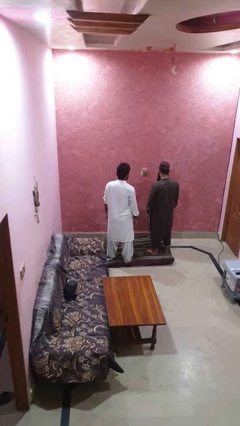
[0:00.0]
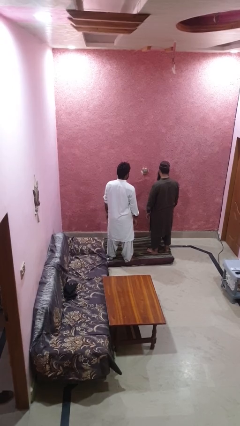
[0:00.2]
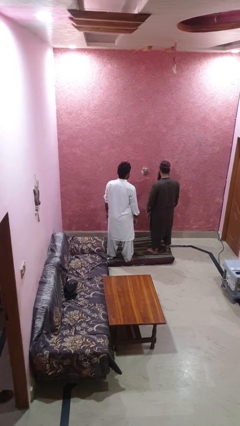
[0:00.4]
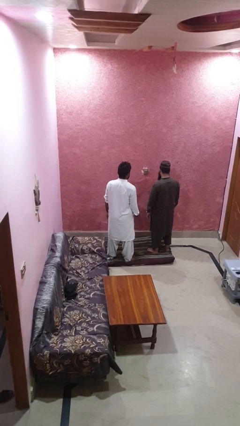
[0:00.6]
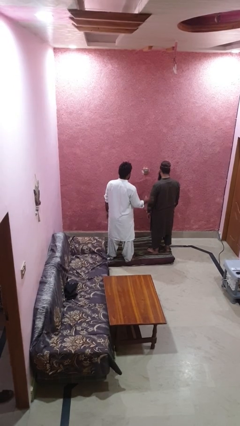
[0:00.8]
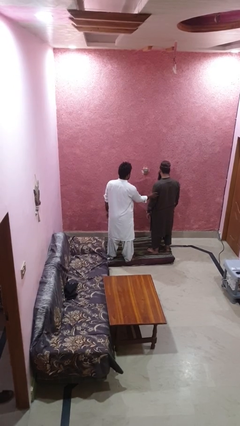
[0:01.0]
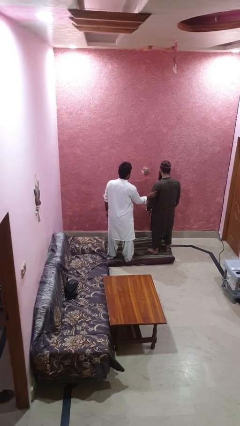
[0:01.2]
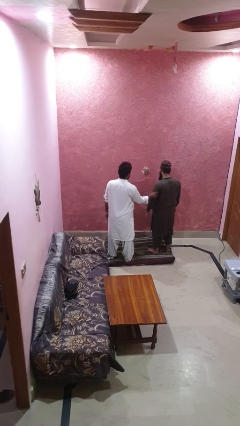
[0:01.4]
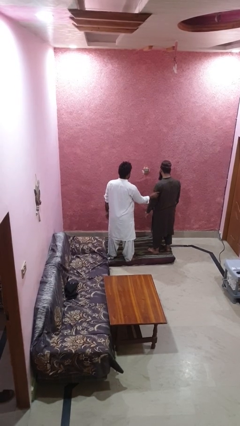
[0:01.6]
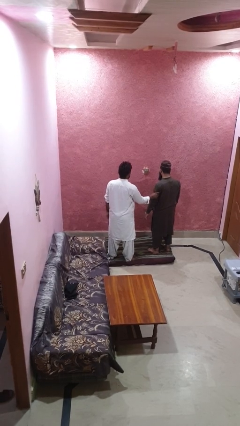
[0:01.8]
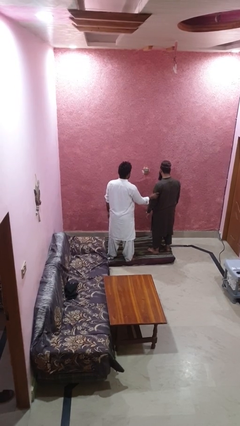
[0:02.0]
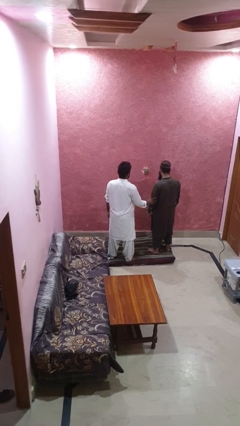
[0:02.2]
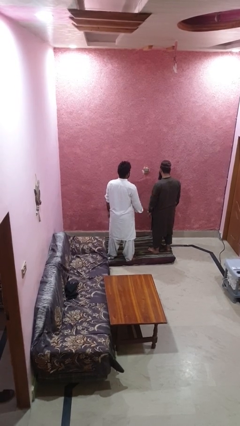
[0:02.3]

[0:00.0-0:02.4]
person grabs person by bicep

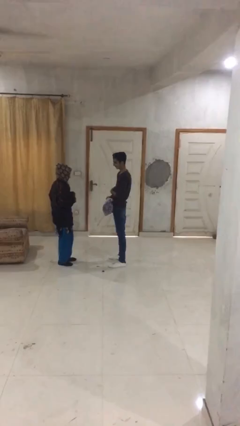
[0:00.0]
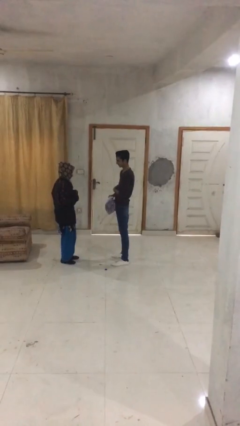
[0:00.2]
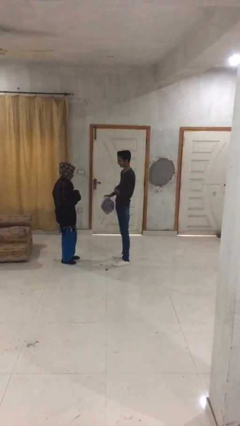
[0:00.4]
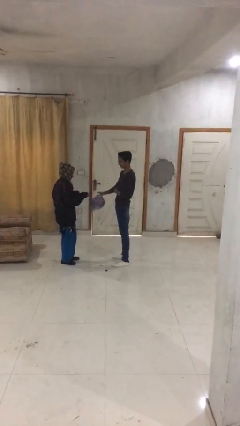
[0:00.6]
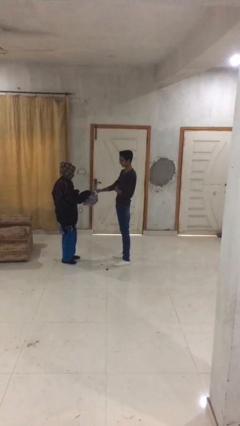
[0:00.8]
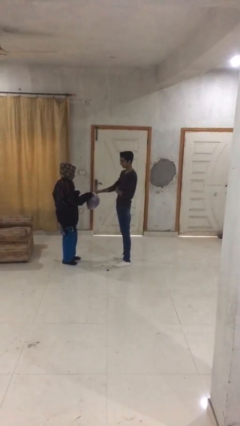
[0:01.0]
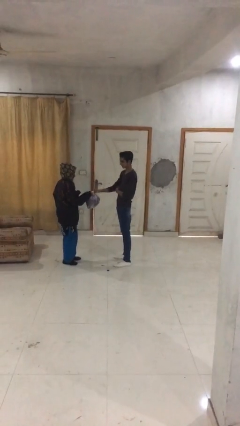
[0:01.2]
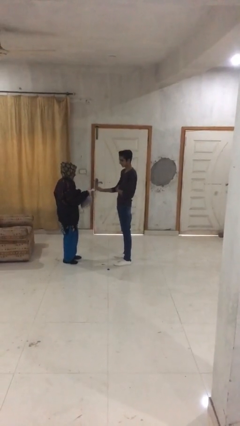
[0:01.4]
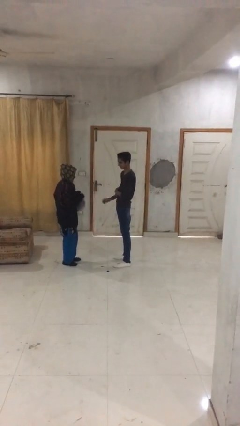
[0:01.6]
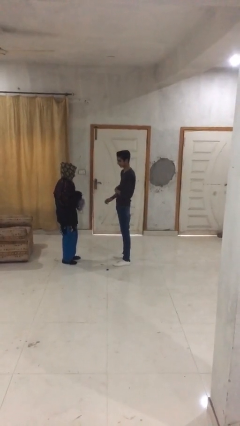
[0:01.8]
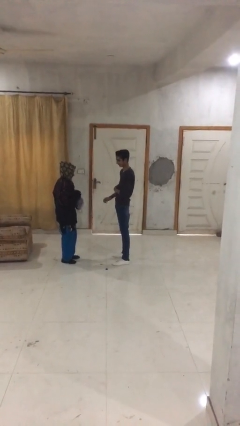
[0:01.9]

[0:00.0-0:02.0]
person transfers object to person

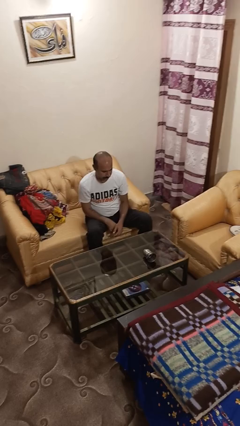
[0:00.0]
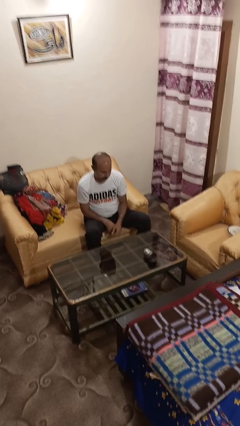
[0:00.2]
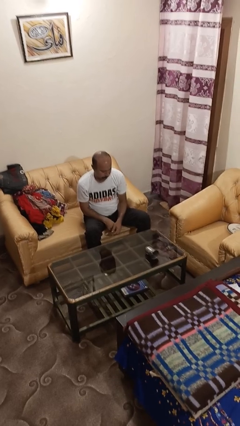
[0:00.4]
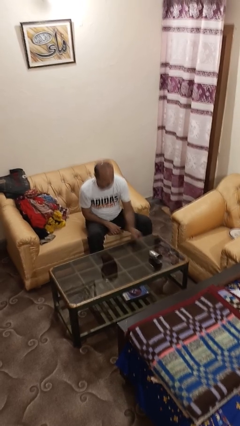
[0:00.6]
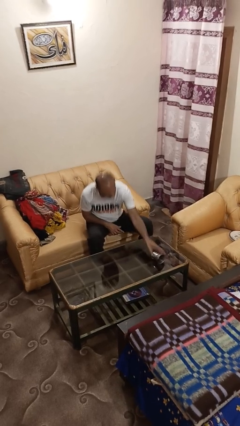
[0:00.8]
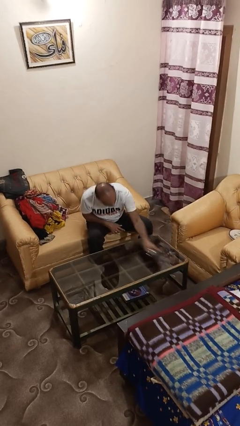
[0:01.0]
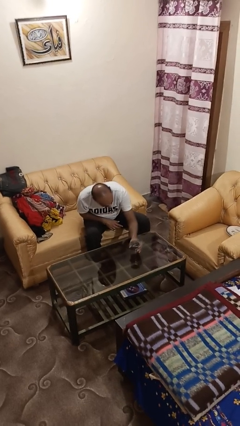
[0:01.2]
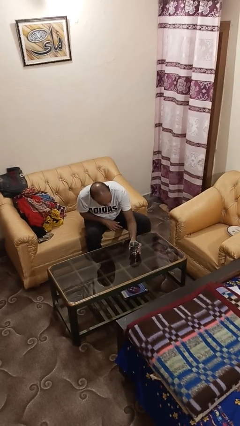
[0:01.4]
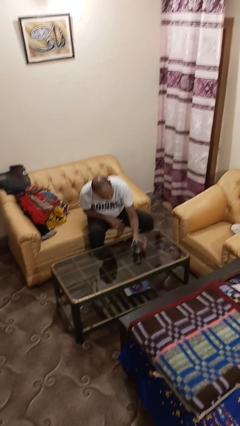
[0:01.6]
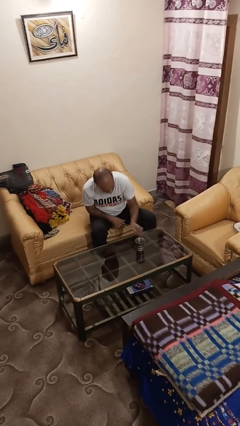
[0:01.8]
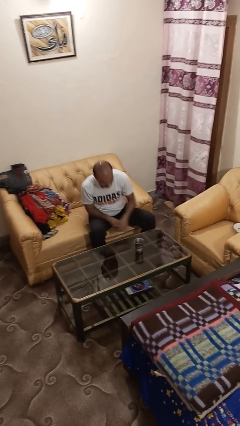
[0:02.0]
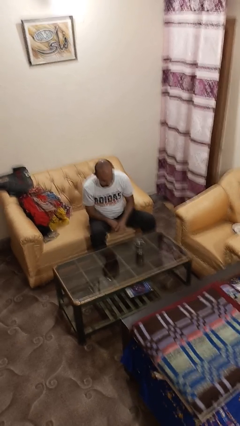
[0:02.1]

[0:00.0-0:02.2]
person sets upright glass

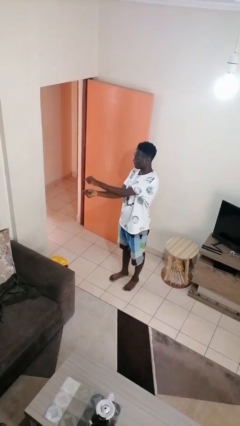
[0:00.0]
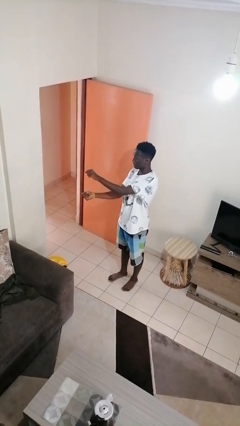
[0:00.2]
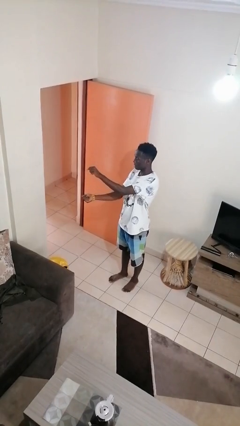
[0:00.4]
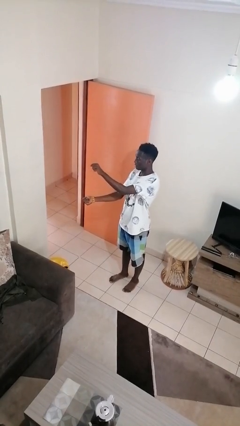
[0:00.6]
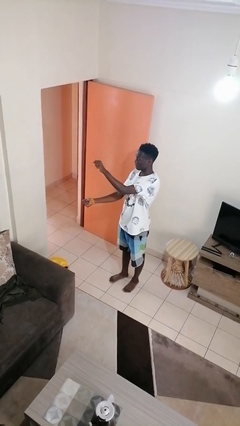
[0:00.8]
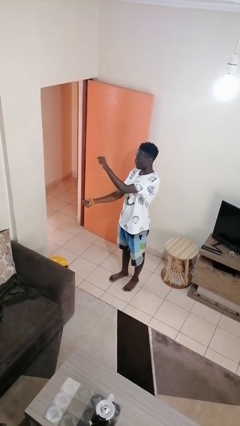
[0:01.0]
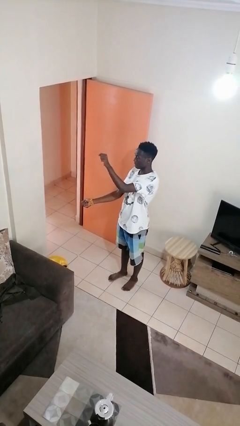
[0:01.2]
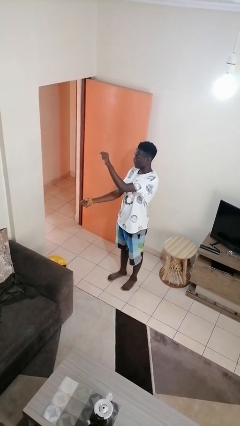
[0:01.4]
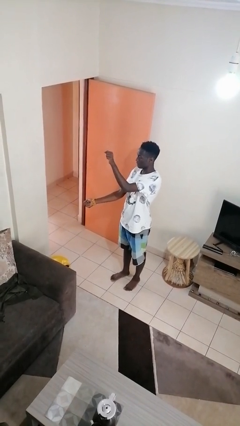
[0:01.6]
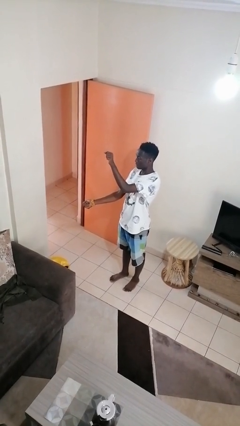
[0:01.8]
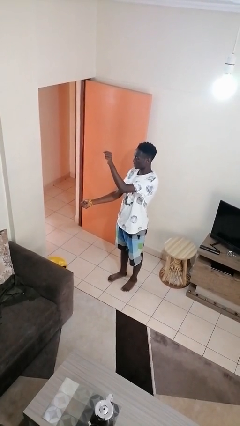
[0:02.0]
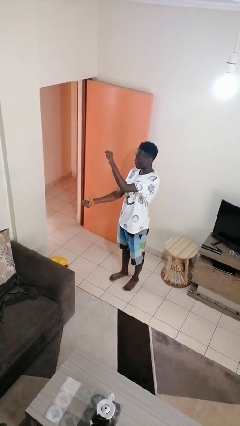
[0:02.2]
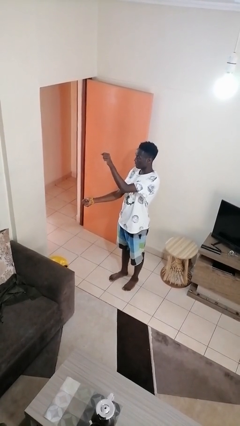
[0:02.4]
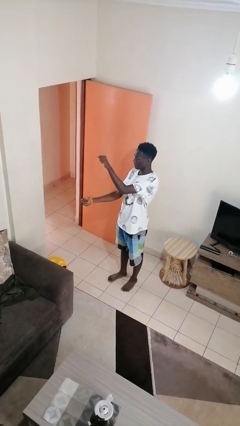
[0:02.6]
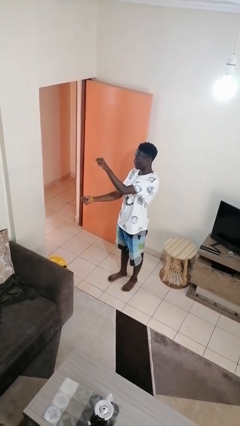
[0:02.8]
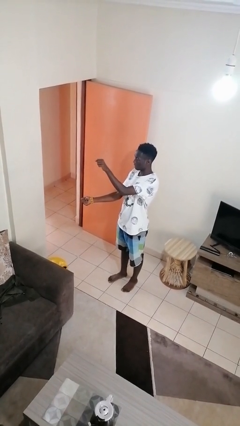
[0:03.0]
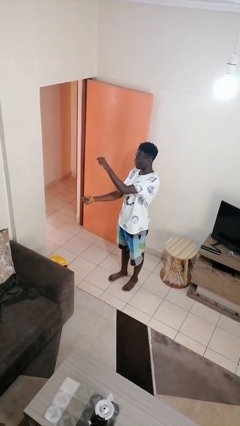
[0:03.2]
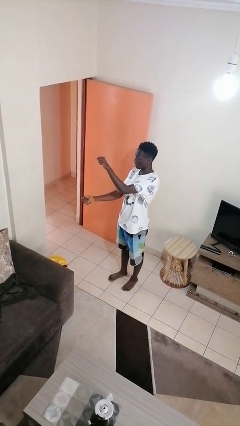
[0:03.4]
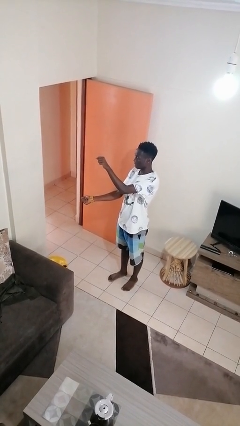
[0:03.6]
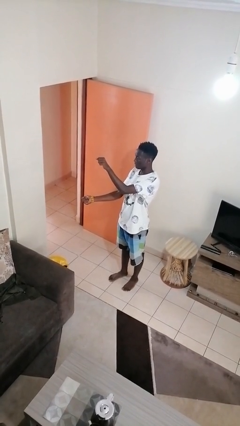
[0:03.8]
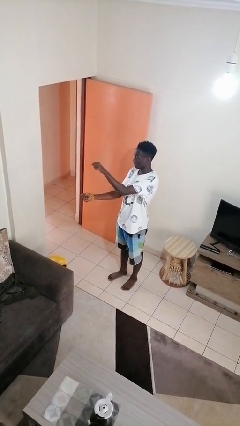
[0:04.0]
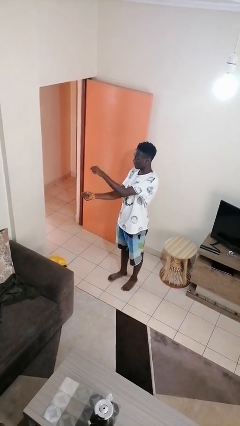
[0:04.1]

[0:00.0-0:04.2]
person gestures zoom in

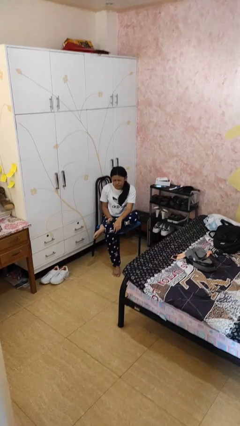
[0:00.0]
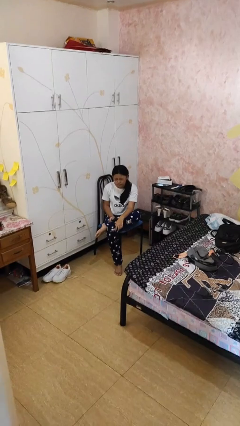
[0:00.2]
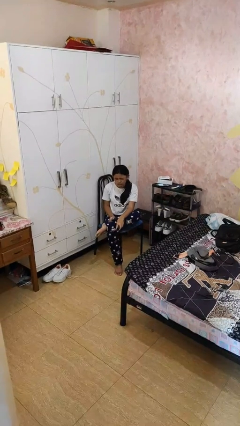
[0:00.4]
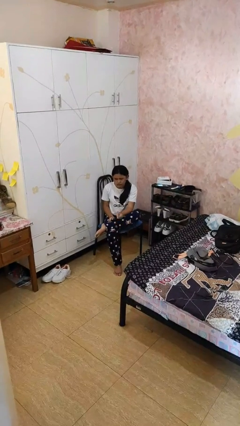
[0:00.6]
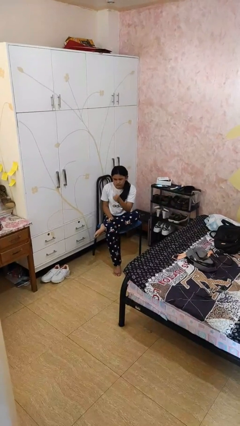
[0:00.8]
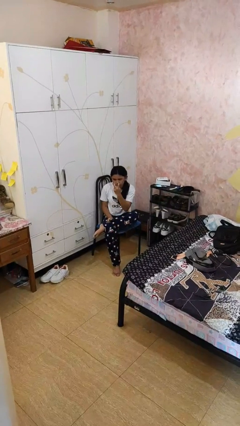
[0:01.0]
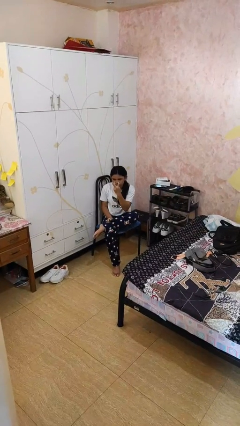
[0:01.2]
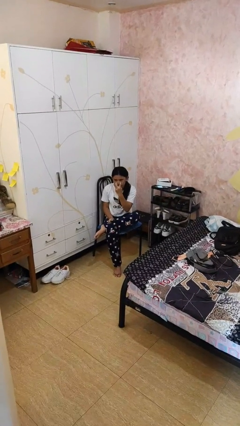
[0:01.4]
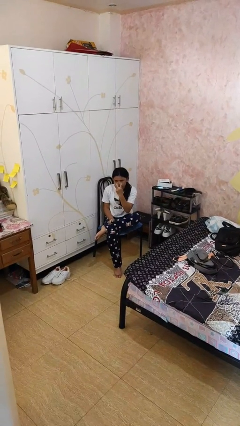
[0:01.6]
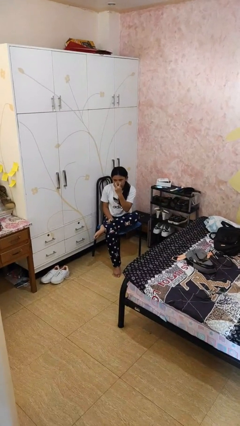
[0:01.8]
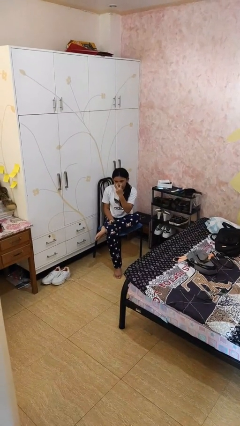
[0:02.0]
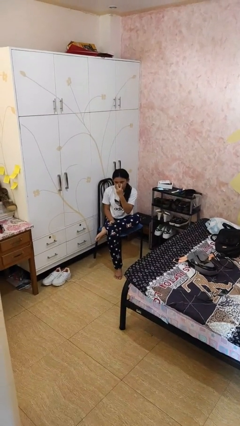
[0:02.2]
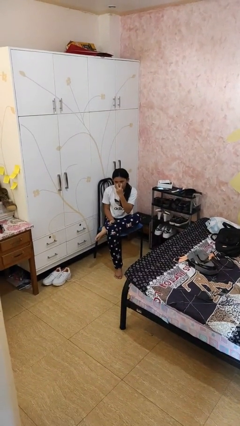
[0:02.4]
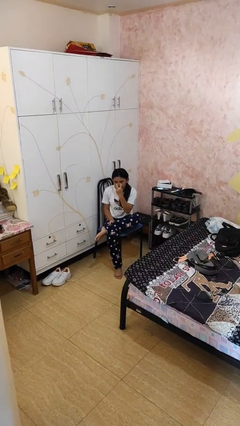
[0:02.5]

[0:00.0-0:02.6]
person gestures watch closely

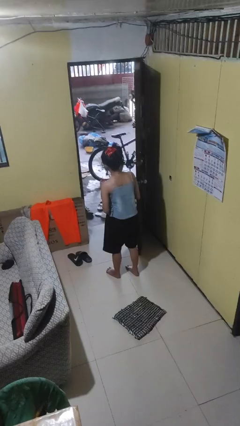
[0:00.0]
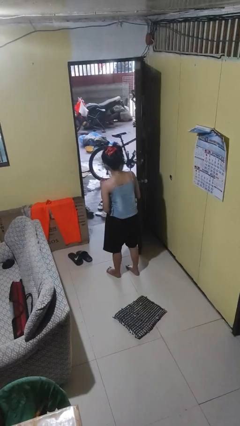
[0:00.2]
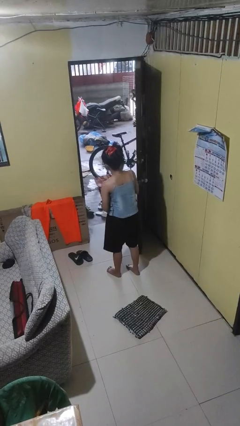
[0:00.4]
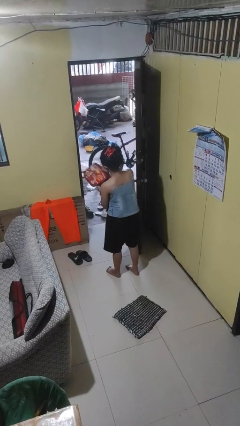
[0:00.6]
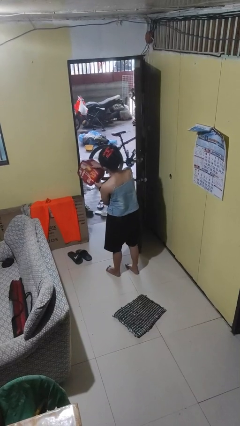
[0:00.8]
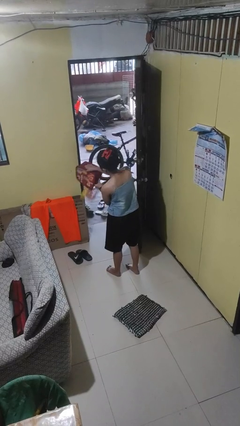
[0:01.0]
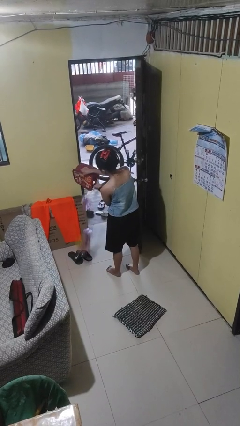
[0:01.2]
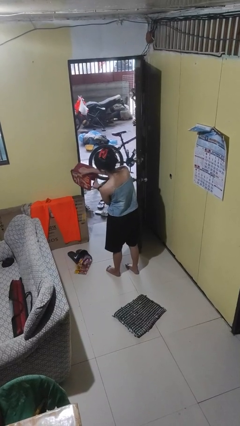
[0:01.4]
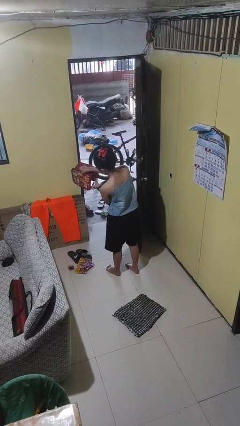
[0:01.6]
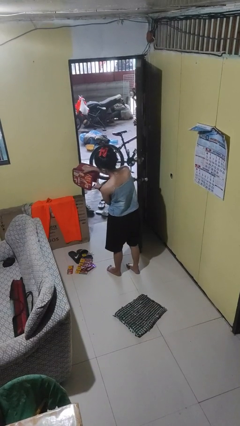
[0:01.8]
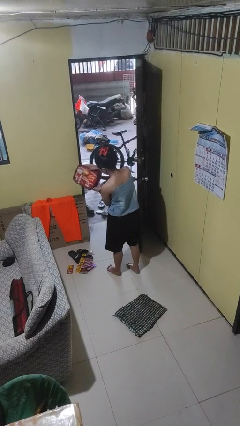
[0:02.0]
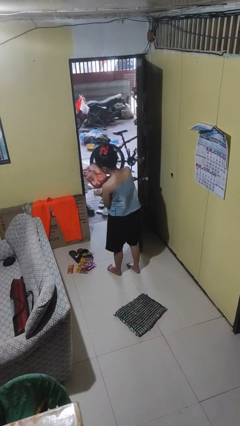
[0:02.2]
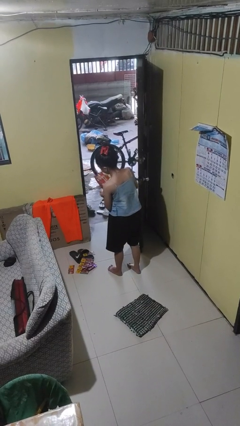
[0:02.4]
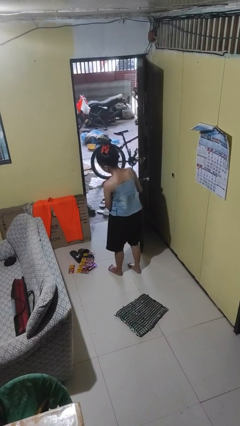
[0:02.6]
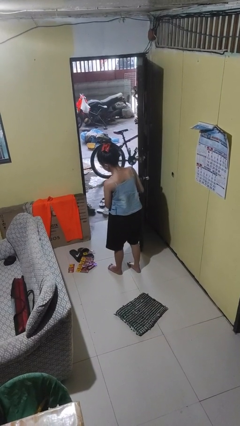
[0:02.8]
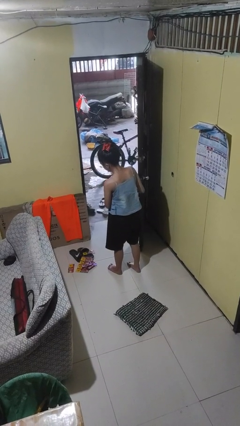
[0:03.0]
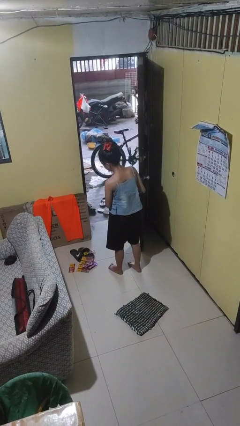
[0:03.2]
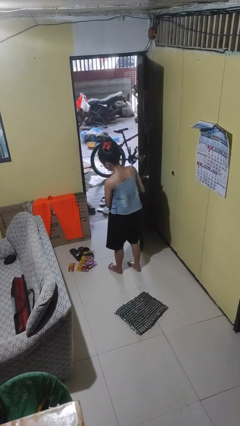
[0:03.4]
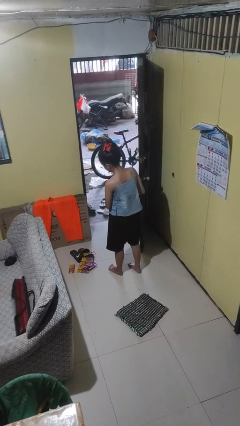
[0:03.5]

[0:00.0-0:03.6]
person unloads box onto floor

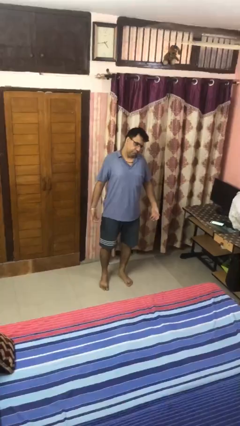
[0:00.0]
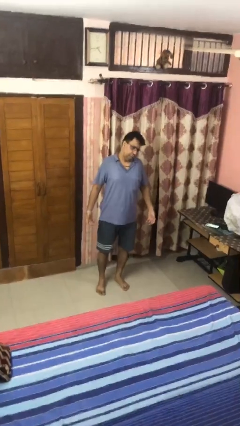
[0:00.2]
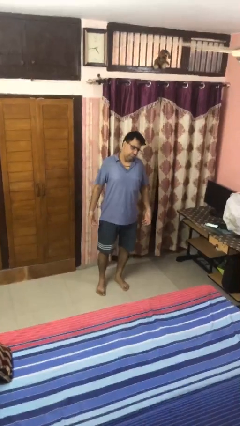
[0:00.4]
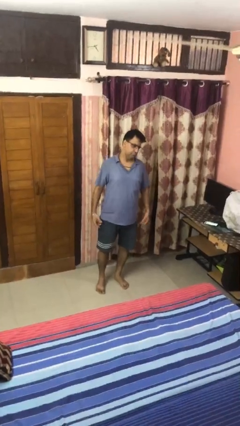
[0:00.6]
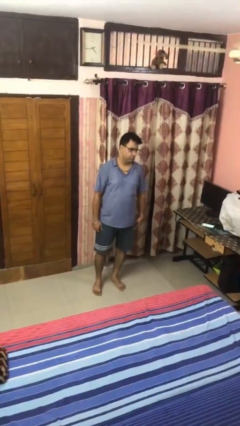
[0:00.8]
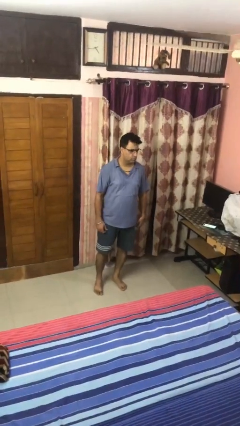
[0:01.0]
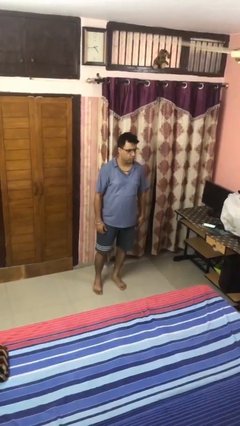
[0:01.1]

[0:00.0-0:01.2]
person shrugs
